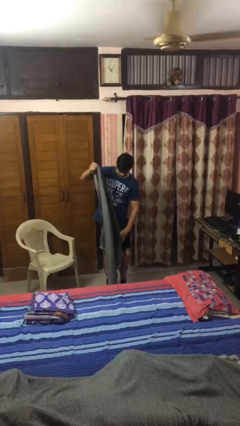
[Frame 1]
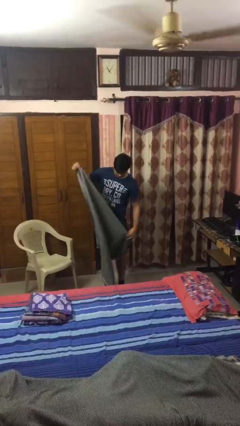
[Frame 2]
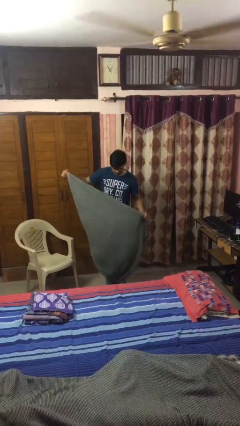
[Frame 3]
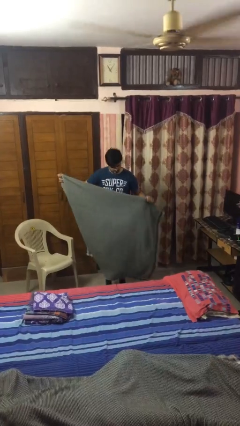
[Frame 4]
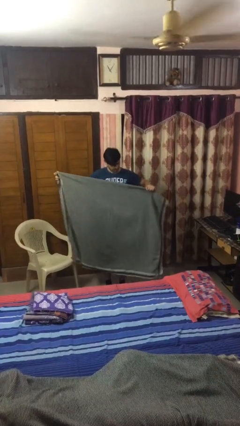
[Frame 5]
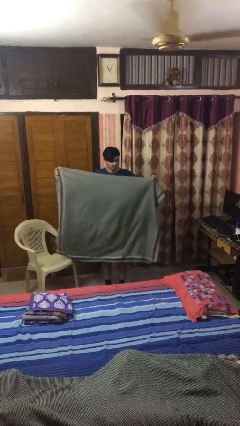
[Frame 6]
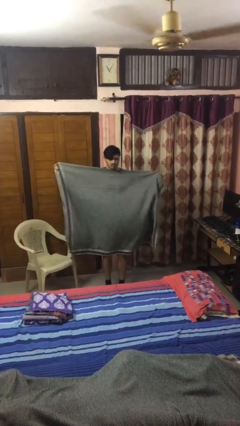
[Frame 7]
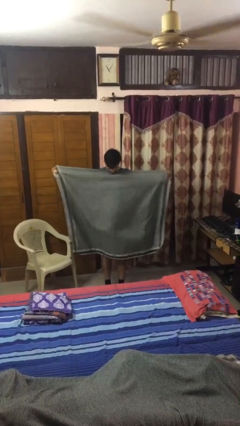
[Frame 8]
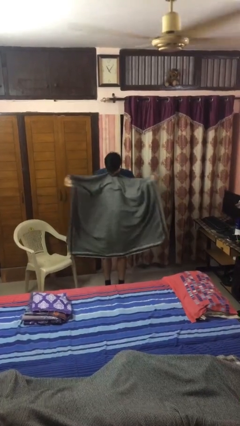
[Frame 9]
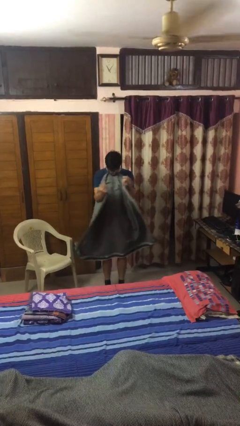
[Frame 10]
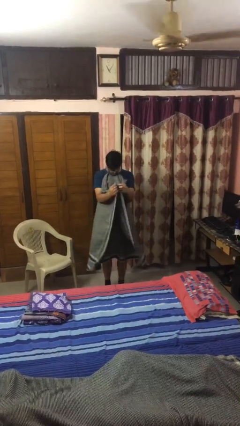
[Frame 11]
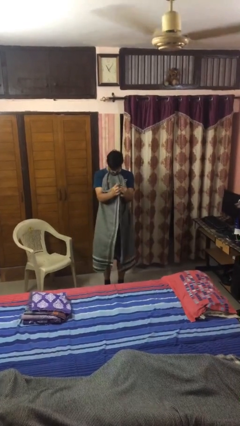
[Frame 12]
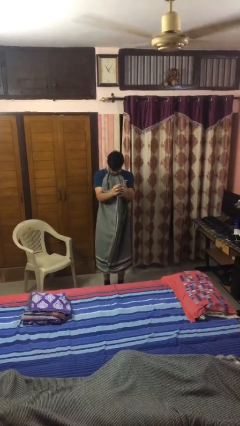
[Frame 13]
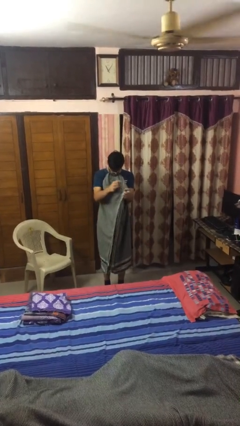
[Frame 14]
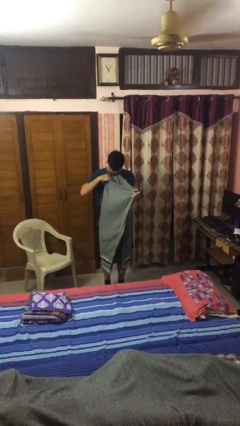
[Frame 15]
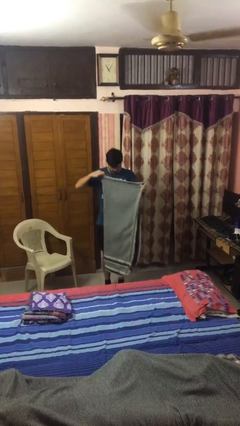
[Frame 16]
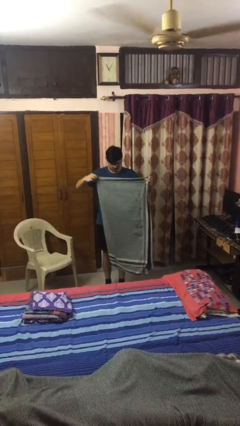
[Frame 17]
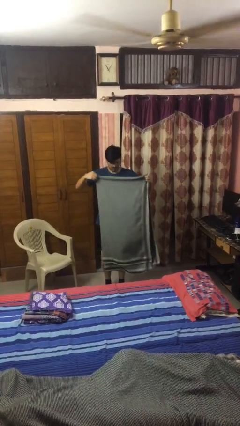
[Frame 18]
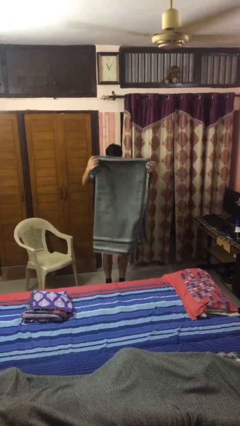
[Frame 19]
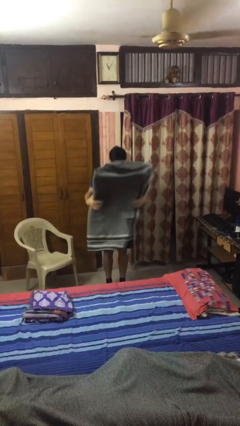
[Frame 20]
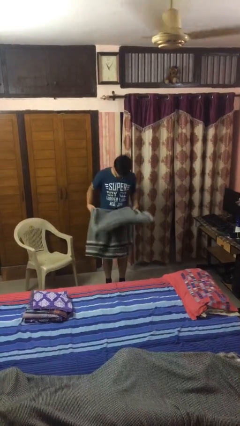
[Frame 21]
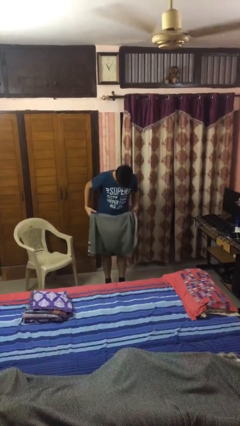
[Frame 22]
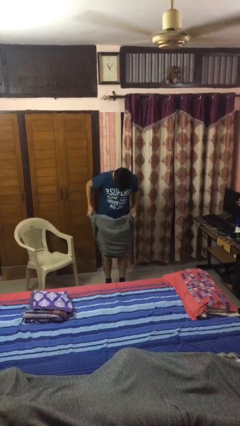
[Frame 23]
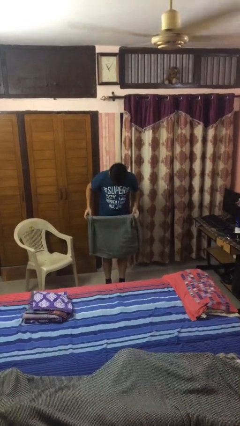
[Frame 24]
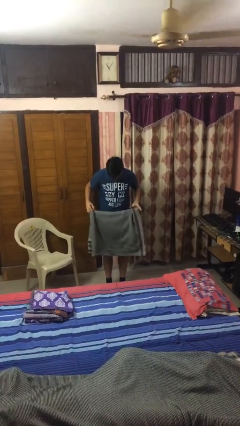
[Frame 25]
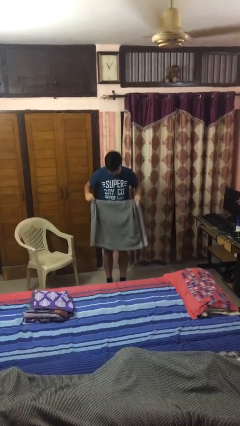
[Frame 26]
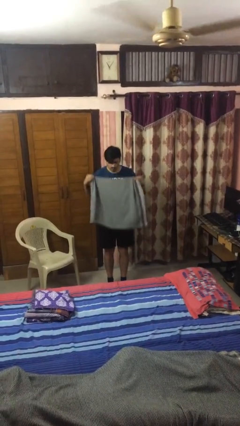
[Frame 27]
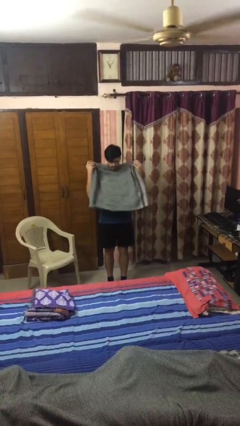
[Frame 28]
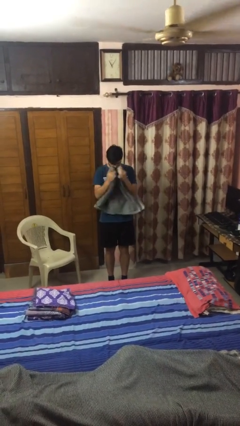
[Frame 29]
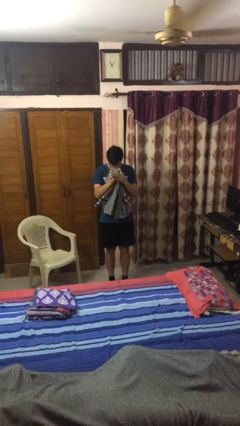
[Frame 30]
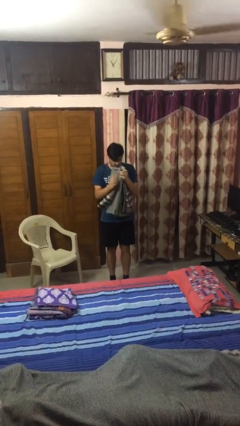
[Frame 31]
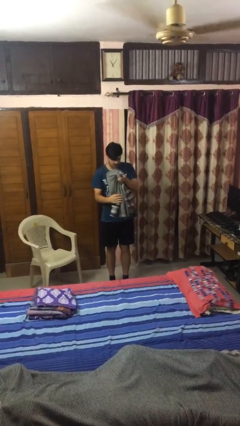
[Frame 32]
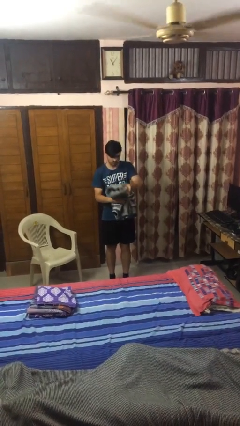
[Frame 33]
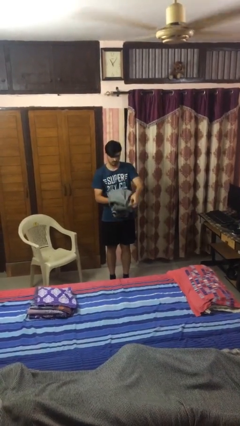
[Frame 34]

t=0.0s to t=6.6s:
person folds blanket

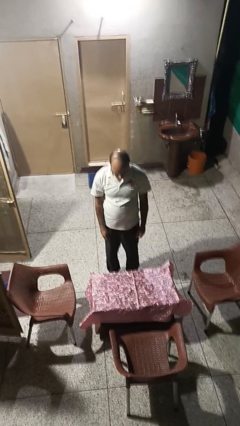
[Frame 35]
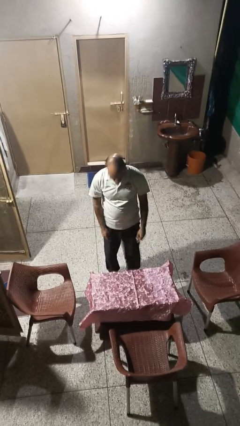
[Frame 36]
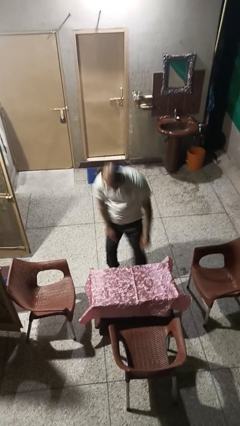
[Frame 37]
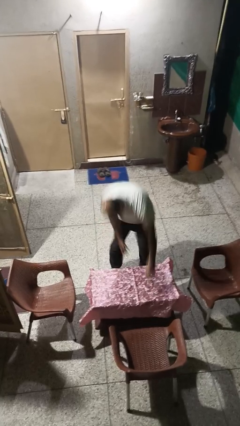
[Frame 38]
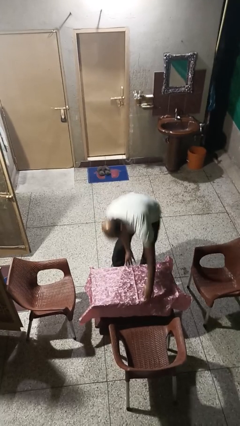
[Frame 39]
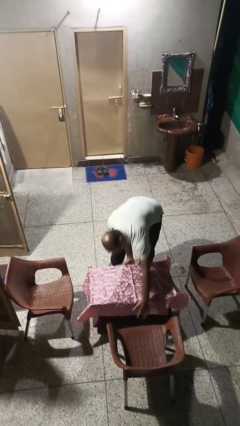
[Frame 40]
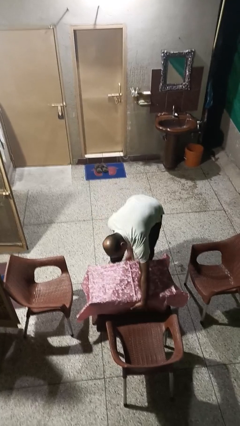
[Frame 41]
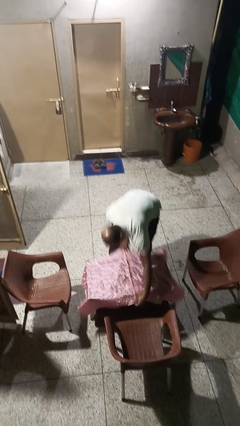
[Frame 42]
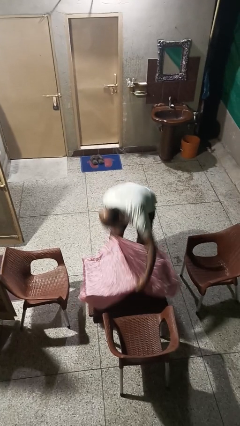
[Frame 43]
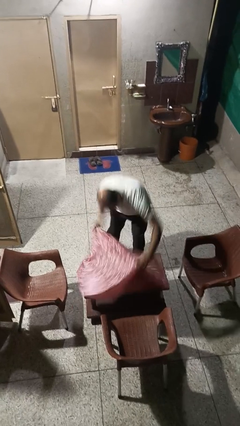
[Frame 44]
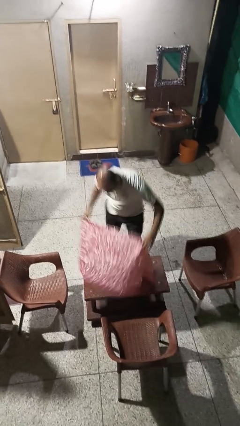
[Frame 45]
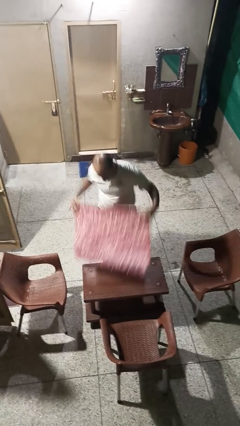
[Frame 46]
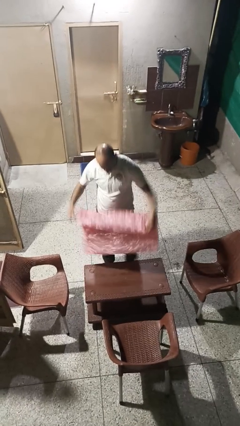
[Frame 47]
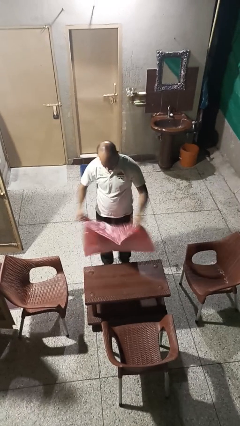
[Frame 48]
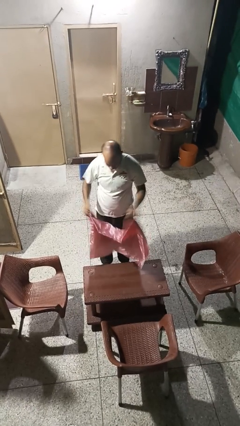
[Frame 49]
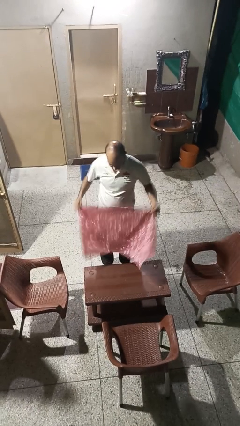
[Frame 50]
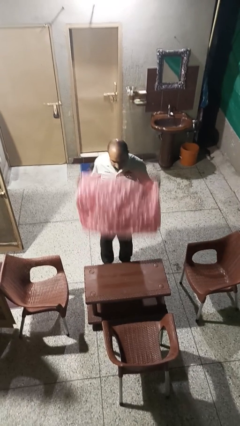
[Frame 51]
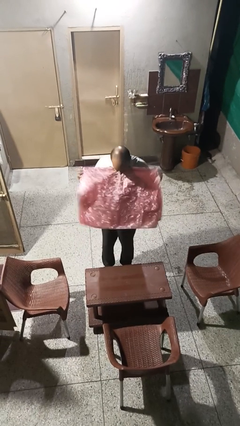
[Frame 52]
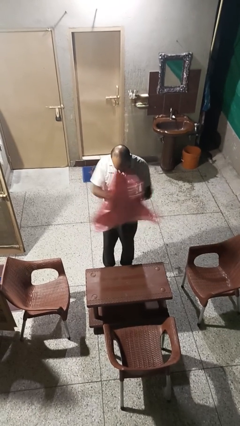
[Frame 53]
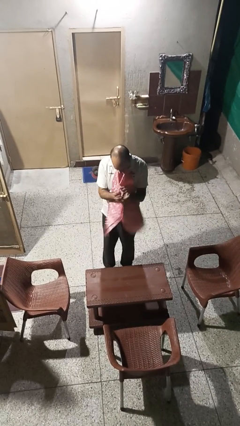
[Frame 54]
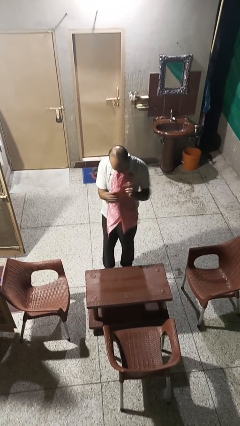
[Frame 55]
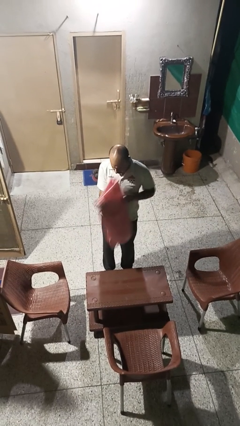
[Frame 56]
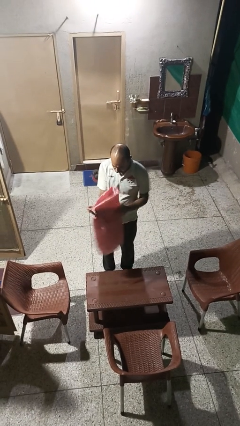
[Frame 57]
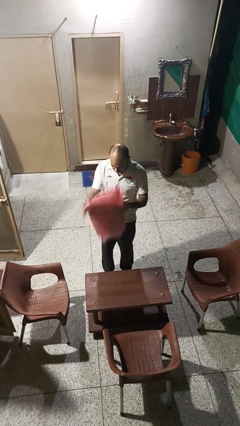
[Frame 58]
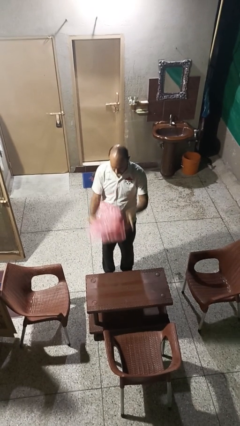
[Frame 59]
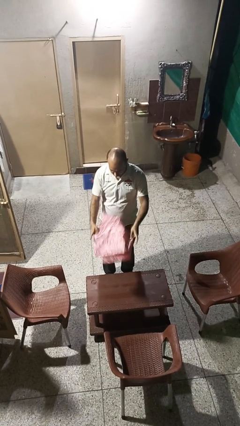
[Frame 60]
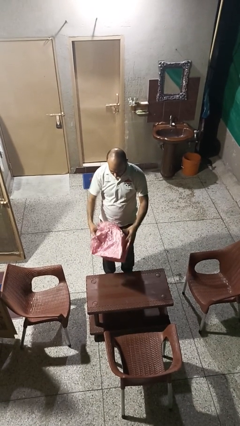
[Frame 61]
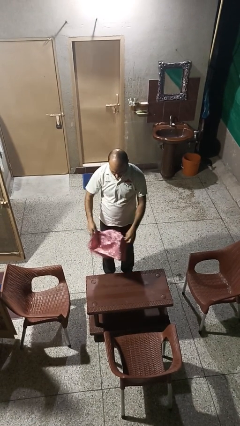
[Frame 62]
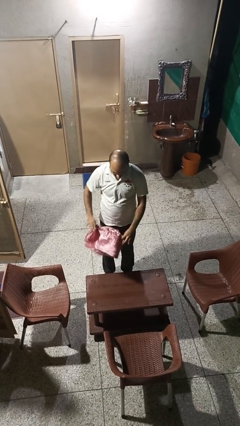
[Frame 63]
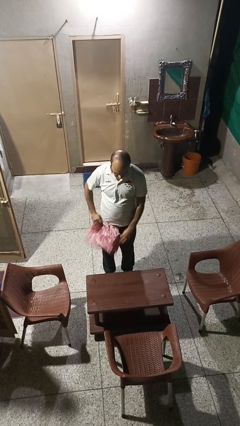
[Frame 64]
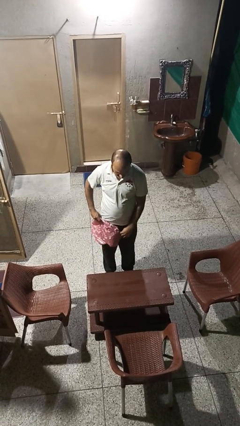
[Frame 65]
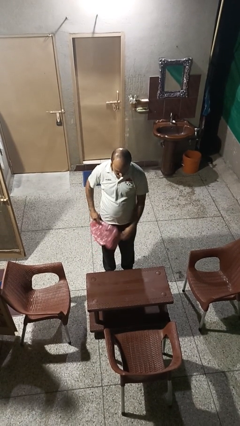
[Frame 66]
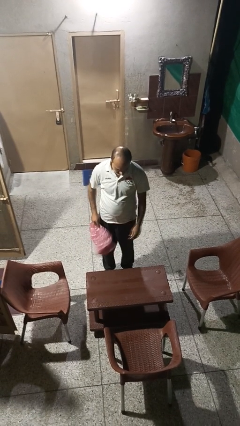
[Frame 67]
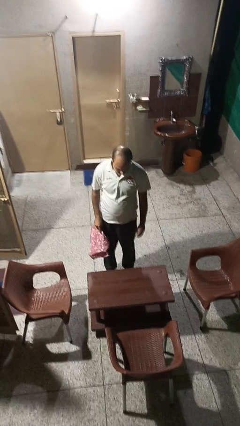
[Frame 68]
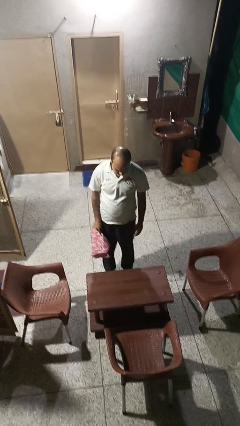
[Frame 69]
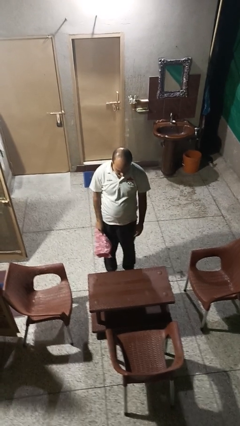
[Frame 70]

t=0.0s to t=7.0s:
person folds tablecloth

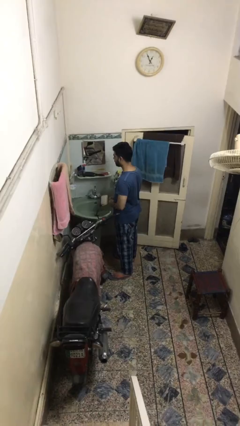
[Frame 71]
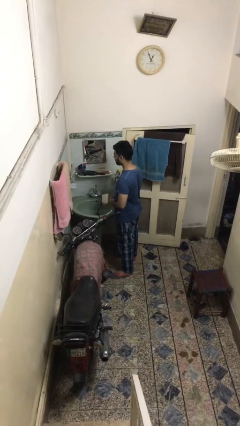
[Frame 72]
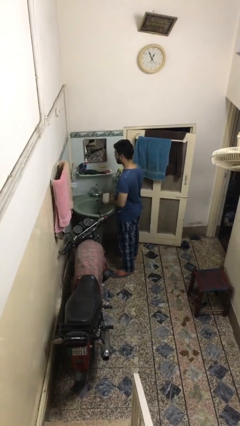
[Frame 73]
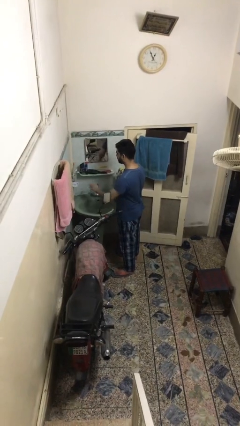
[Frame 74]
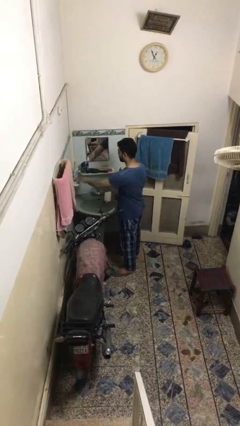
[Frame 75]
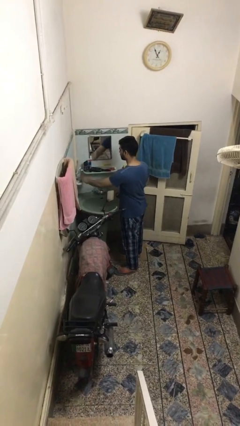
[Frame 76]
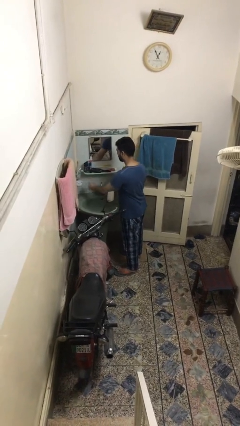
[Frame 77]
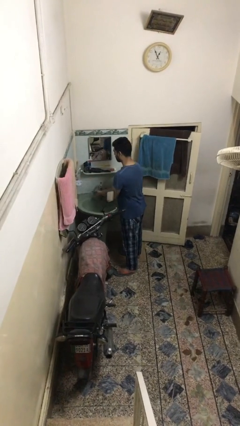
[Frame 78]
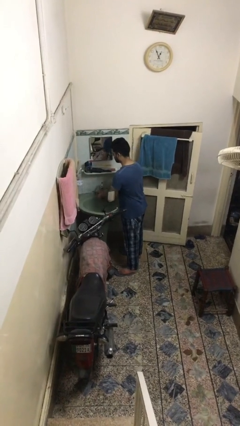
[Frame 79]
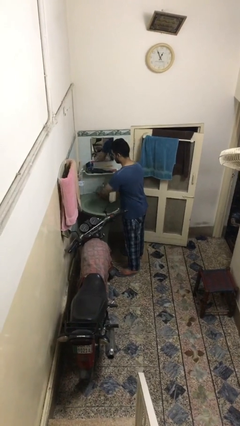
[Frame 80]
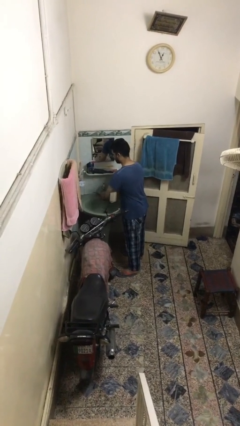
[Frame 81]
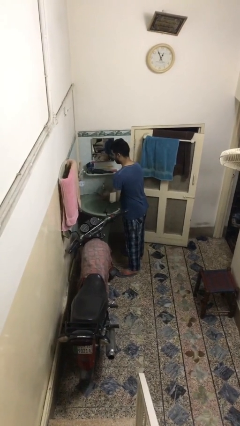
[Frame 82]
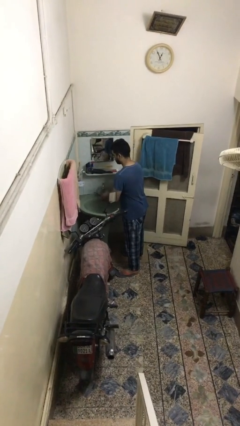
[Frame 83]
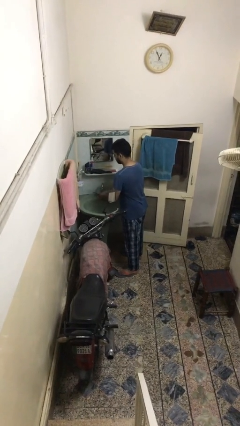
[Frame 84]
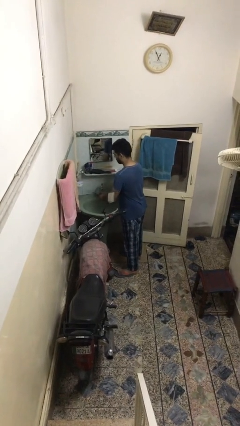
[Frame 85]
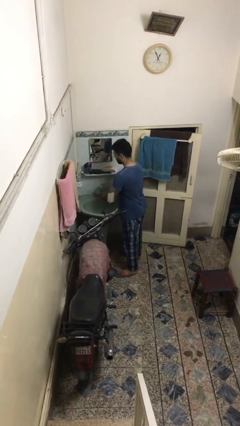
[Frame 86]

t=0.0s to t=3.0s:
person washes hands

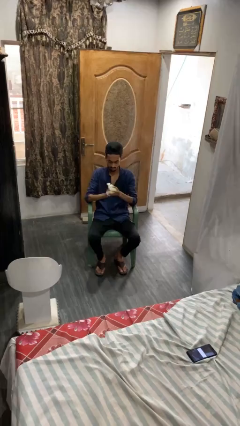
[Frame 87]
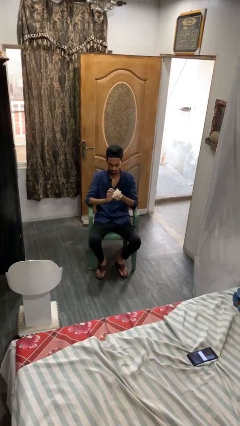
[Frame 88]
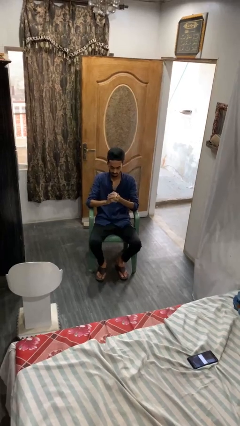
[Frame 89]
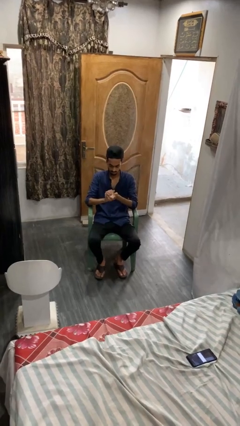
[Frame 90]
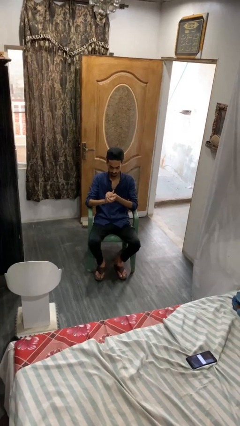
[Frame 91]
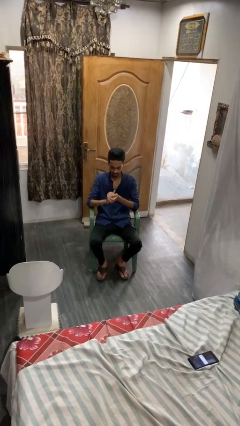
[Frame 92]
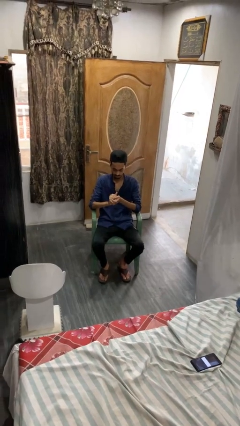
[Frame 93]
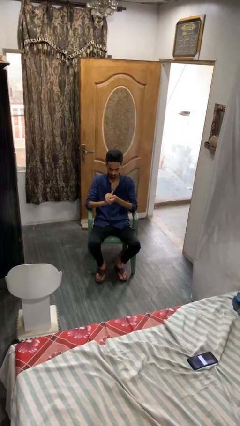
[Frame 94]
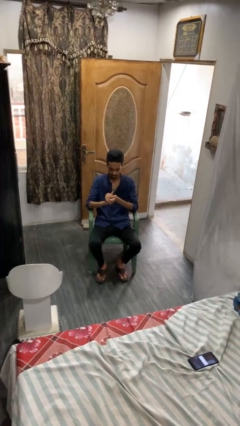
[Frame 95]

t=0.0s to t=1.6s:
person crumples paper
